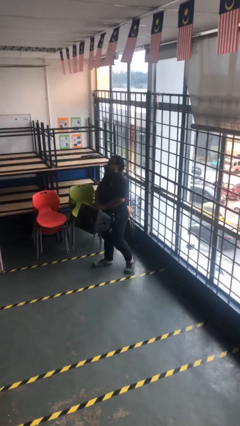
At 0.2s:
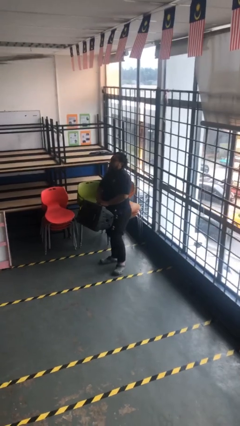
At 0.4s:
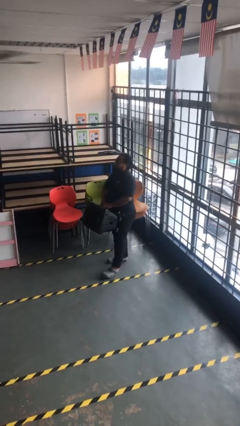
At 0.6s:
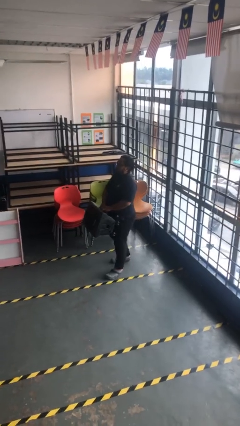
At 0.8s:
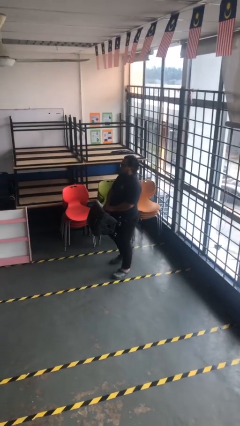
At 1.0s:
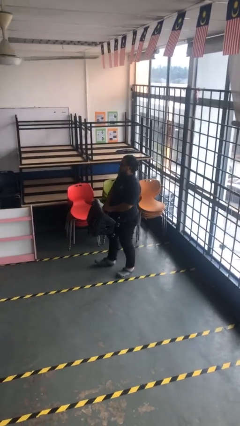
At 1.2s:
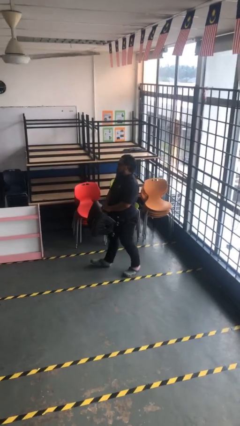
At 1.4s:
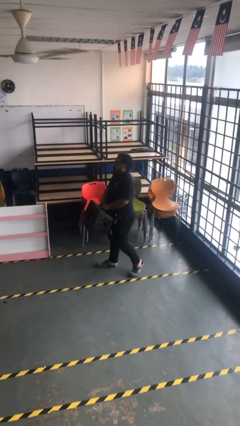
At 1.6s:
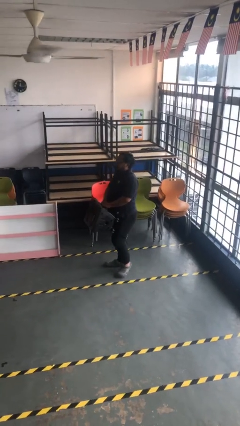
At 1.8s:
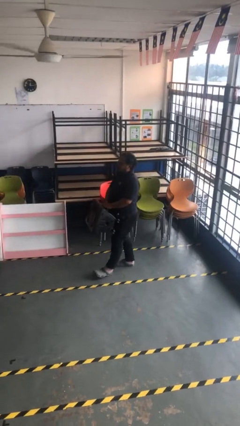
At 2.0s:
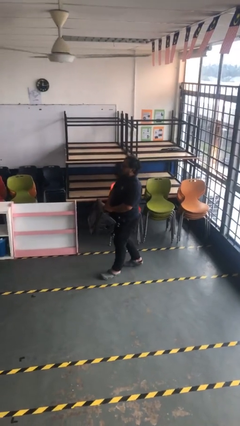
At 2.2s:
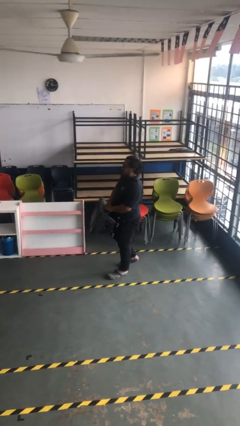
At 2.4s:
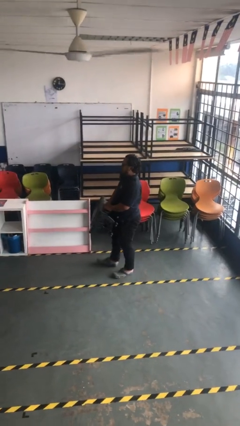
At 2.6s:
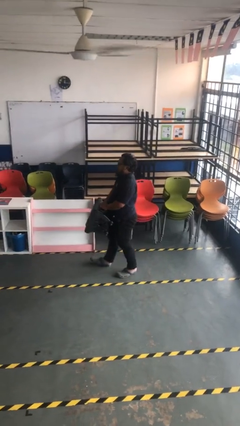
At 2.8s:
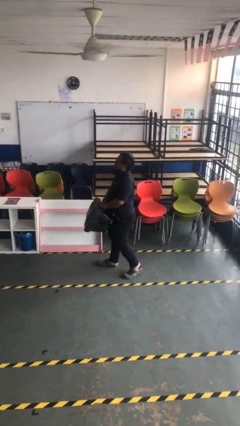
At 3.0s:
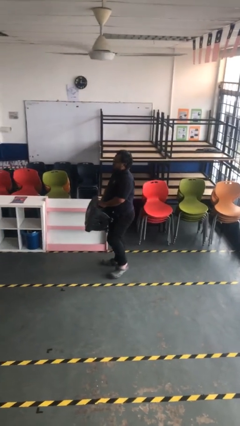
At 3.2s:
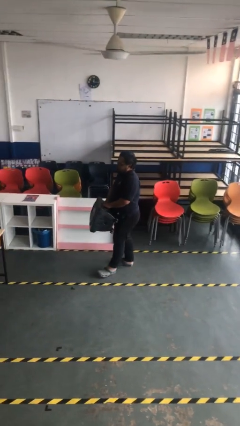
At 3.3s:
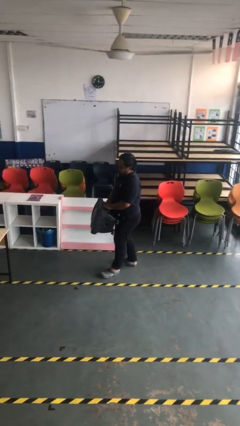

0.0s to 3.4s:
person carries heavy object

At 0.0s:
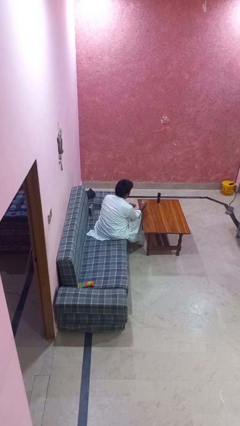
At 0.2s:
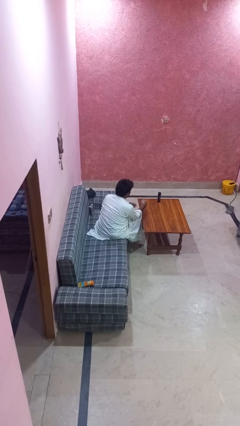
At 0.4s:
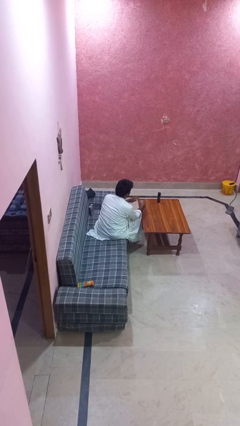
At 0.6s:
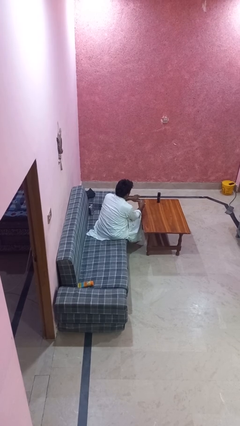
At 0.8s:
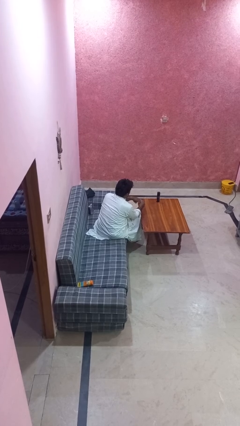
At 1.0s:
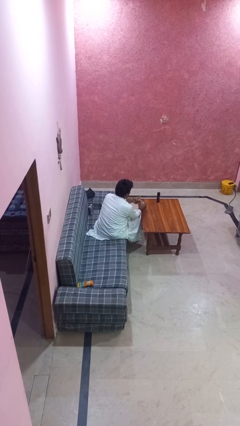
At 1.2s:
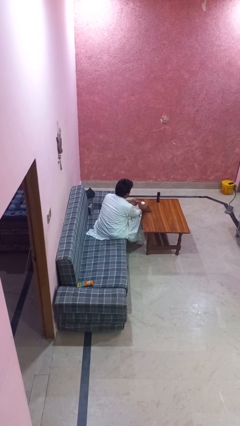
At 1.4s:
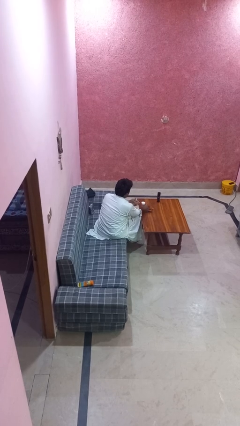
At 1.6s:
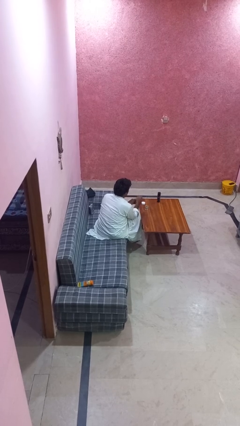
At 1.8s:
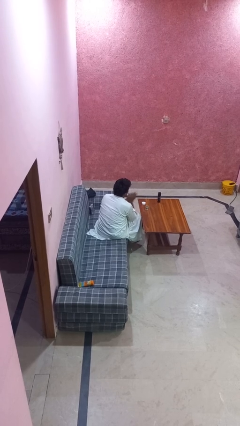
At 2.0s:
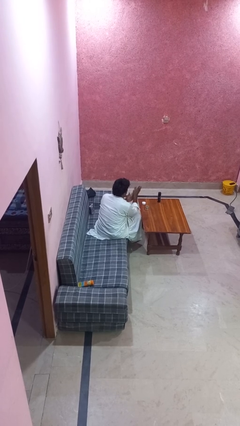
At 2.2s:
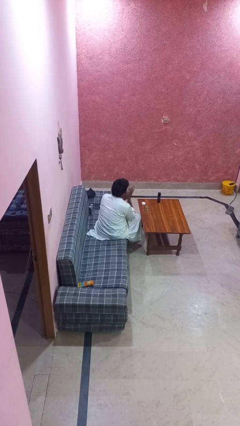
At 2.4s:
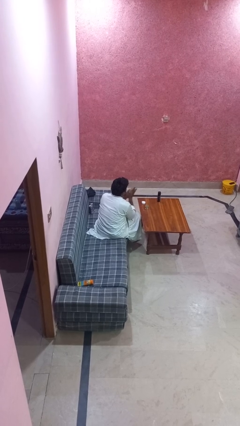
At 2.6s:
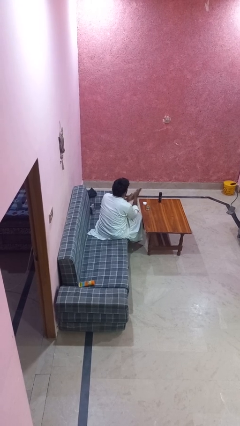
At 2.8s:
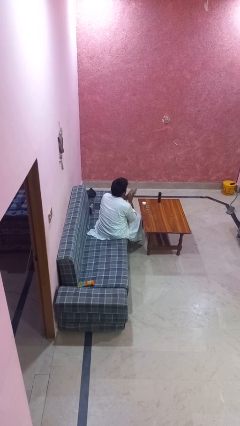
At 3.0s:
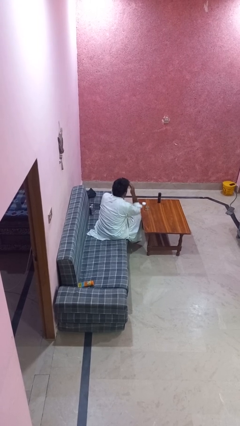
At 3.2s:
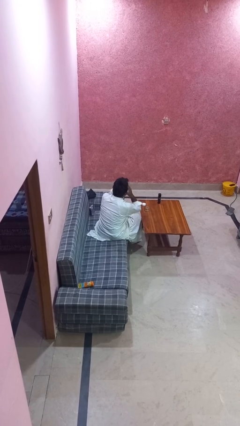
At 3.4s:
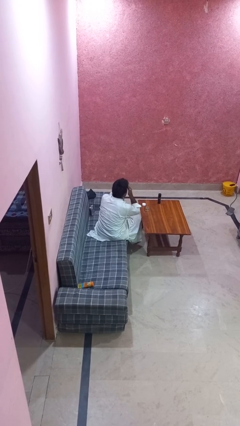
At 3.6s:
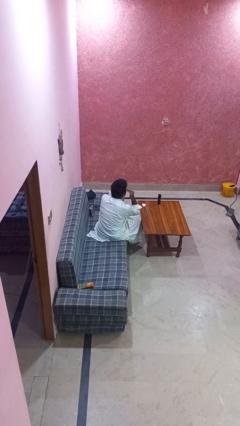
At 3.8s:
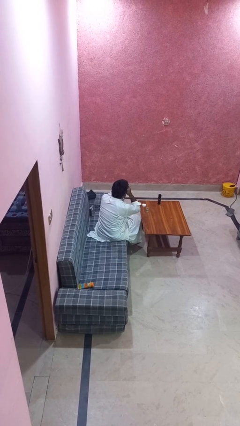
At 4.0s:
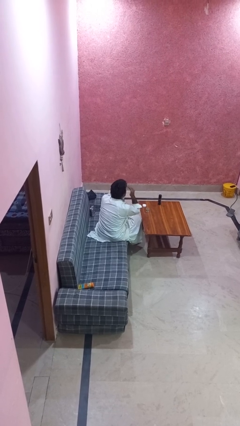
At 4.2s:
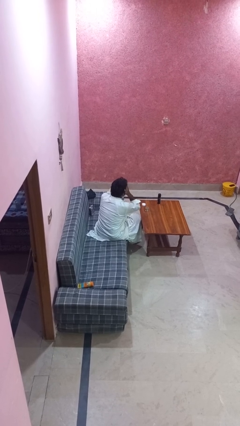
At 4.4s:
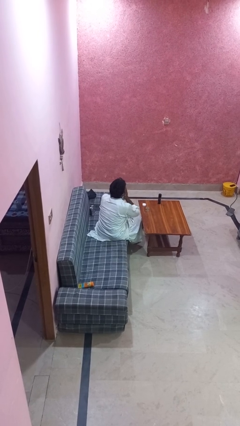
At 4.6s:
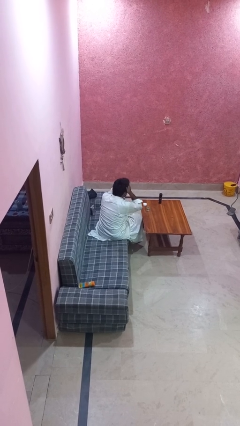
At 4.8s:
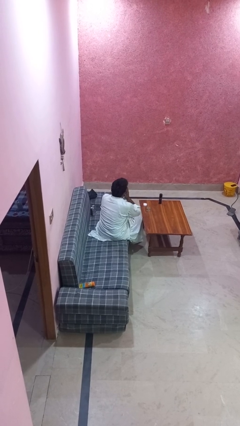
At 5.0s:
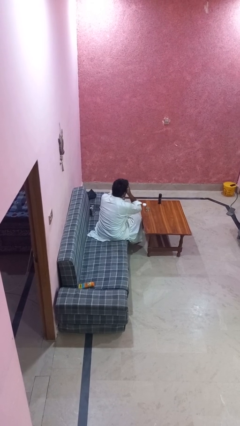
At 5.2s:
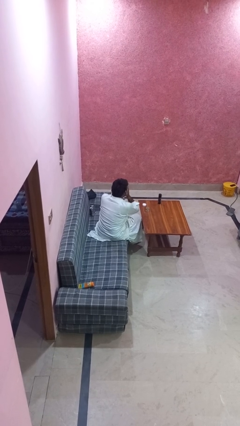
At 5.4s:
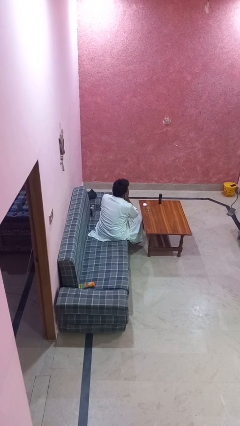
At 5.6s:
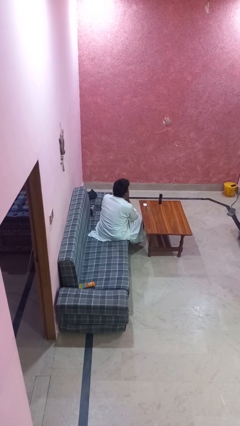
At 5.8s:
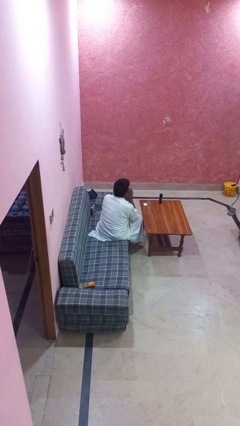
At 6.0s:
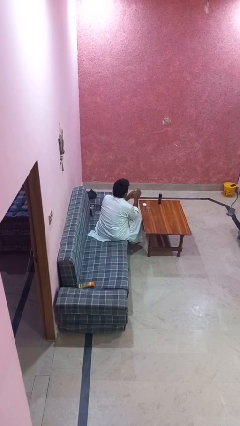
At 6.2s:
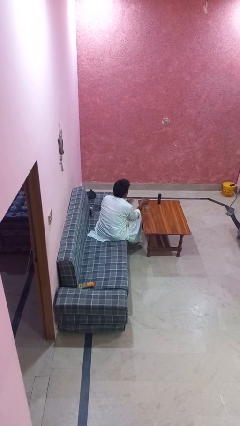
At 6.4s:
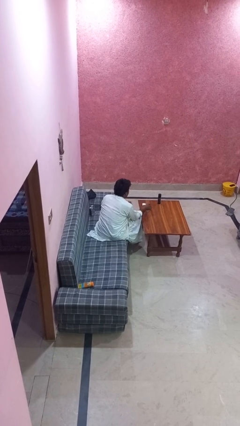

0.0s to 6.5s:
person applies facial moisturizer

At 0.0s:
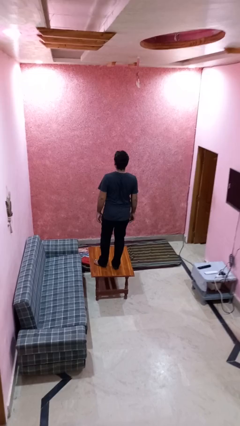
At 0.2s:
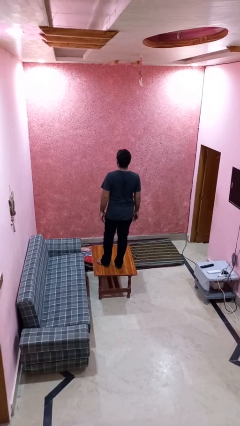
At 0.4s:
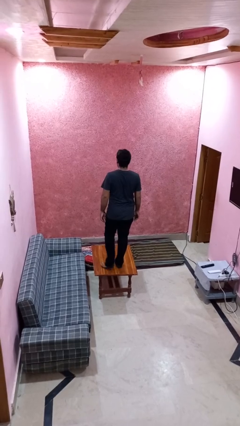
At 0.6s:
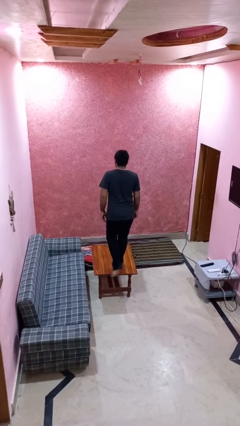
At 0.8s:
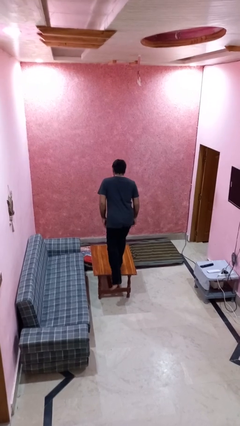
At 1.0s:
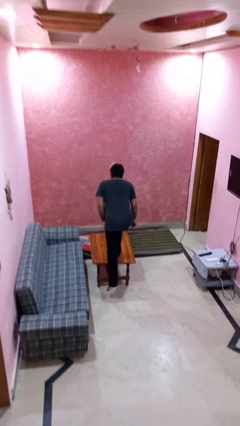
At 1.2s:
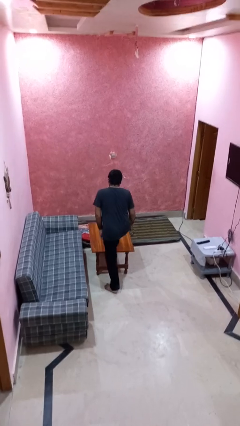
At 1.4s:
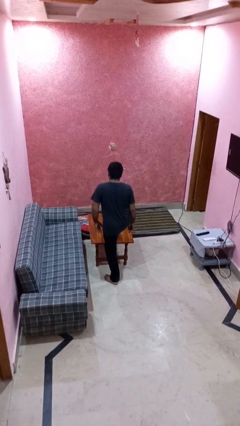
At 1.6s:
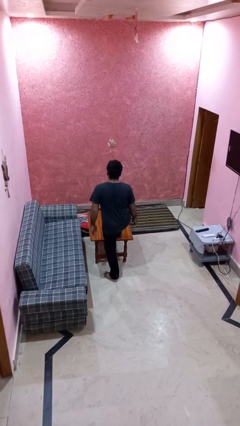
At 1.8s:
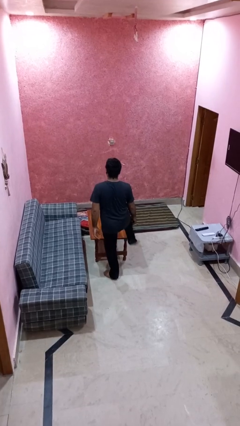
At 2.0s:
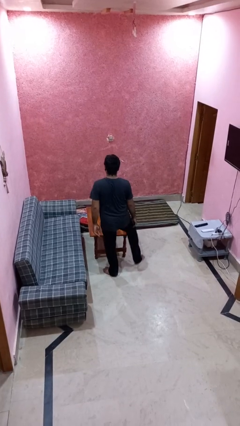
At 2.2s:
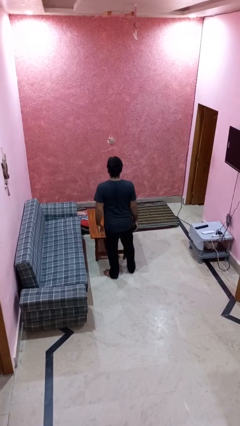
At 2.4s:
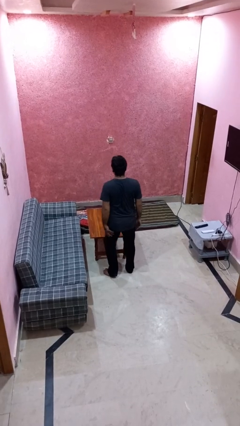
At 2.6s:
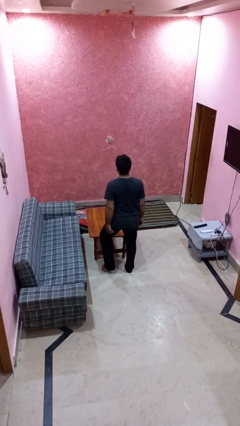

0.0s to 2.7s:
person climbs off table

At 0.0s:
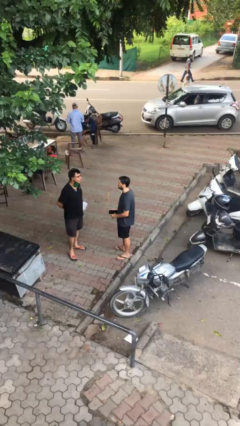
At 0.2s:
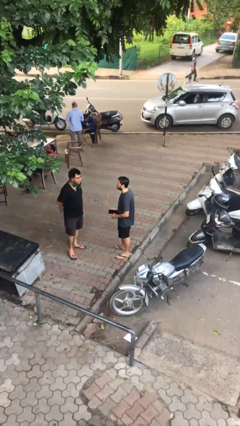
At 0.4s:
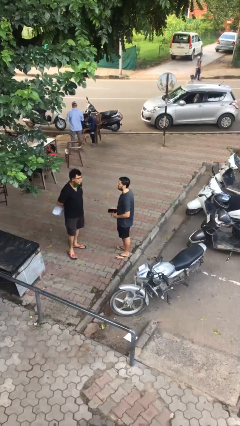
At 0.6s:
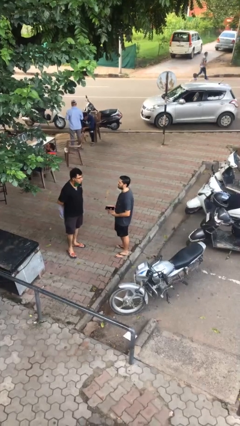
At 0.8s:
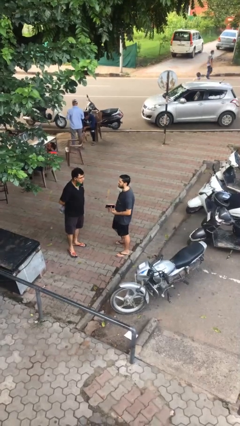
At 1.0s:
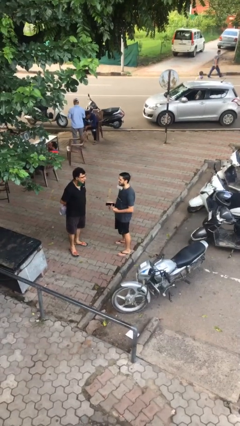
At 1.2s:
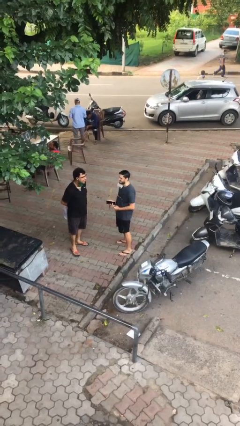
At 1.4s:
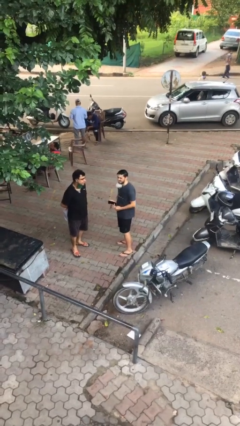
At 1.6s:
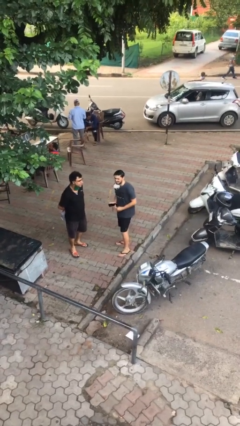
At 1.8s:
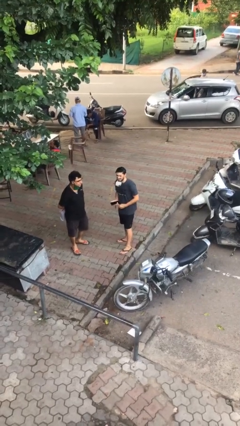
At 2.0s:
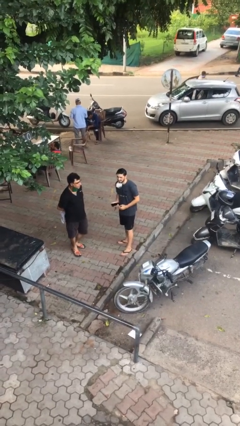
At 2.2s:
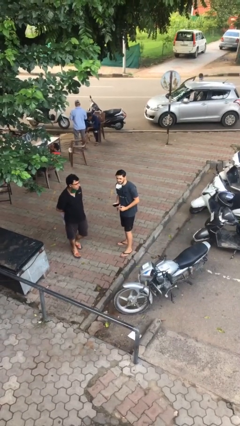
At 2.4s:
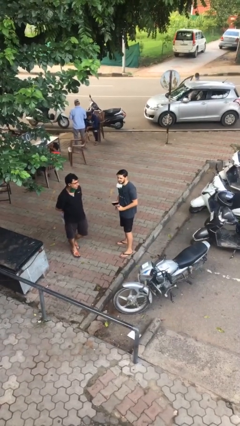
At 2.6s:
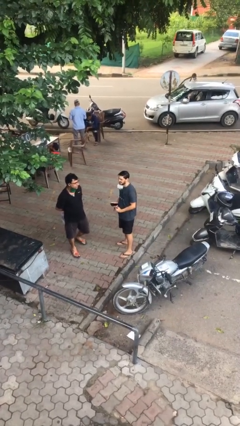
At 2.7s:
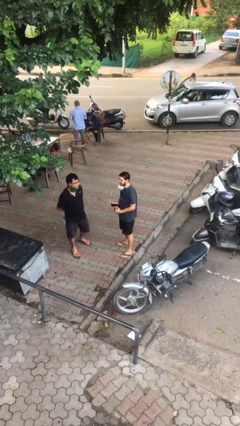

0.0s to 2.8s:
person laughs with person

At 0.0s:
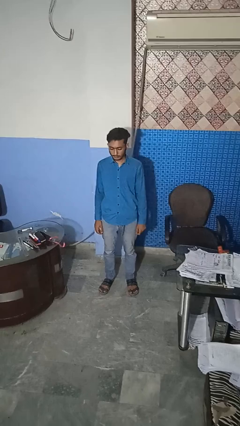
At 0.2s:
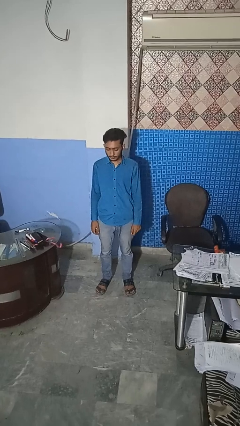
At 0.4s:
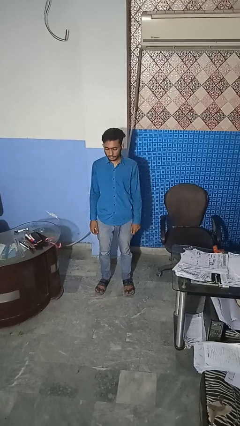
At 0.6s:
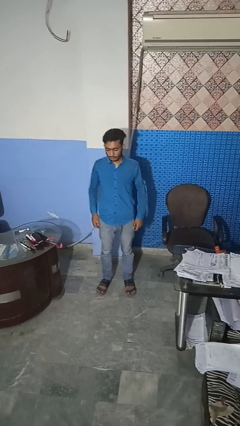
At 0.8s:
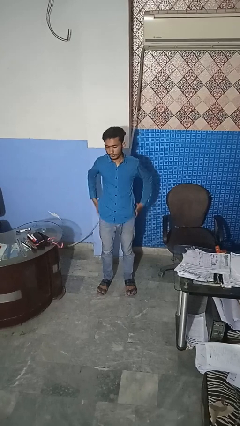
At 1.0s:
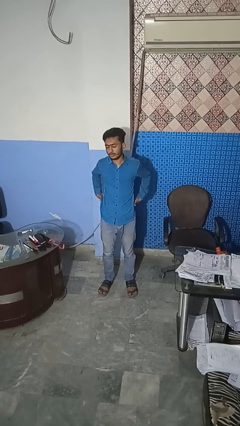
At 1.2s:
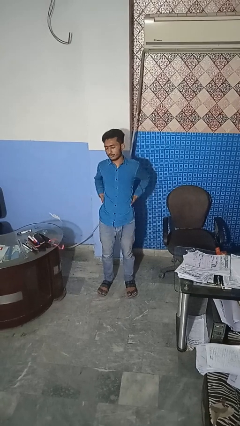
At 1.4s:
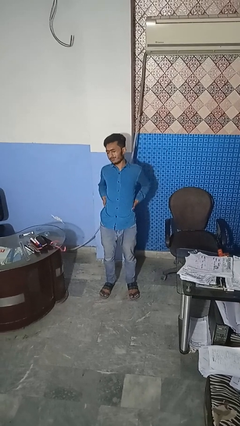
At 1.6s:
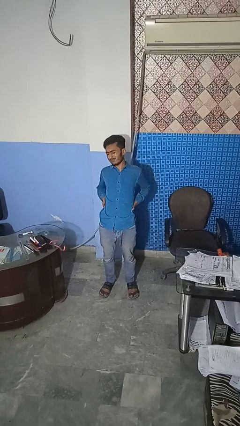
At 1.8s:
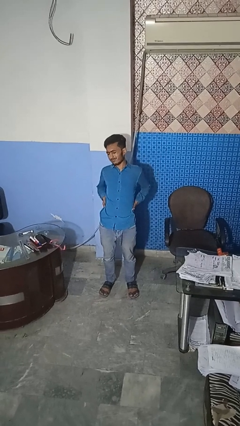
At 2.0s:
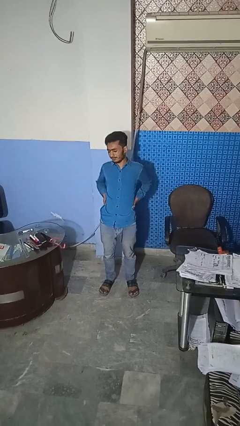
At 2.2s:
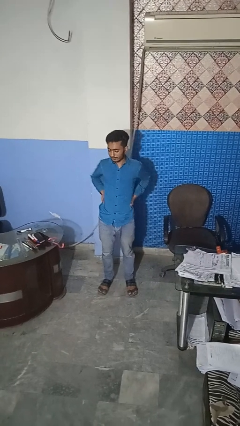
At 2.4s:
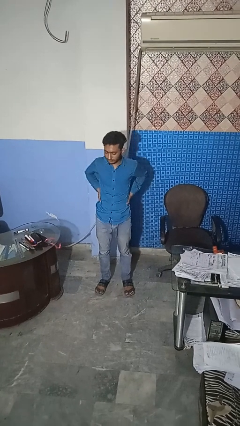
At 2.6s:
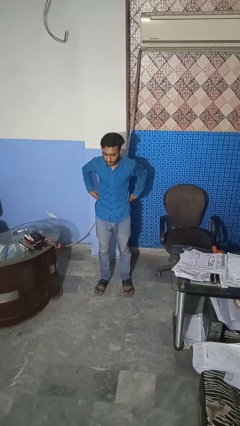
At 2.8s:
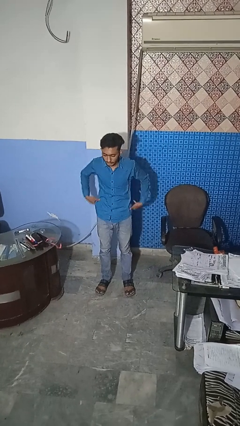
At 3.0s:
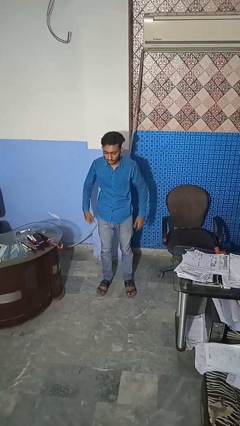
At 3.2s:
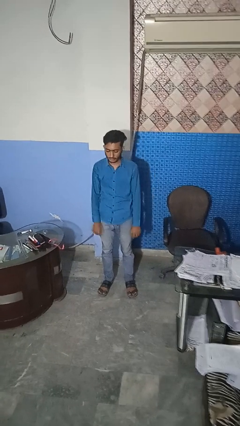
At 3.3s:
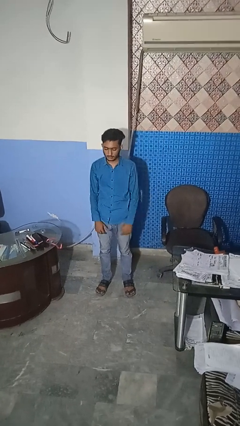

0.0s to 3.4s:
person stretches back
